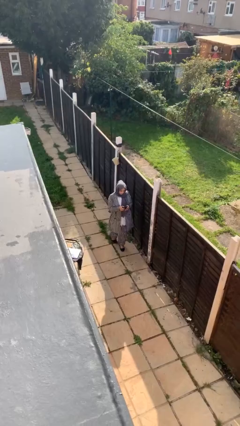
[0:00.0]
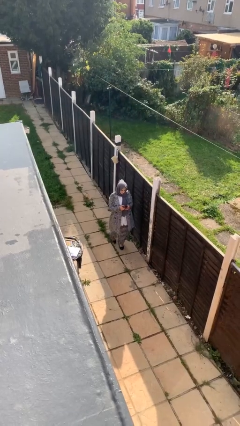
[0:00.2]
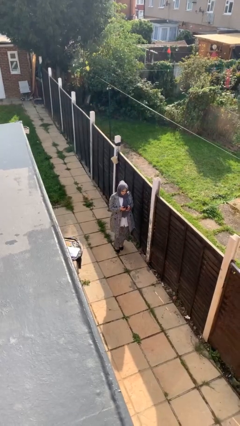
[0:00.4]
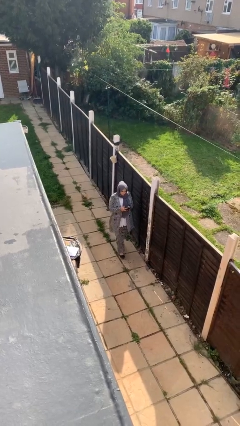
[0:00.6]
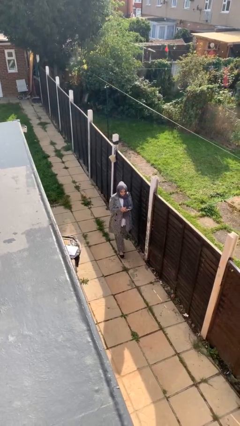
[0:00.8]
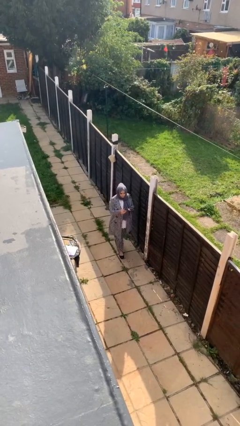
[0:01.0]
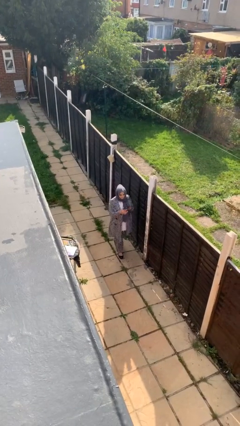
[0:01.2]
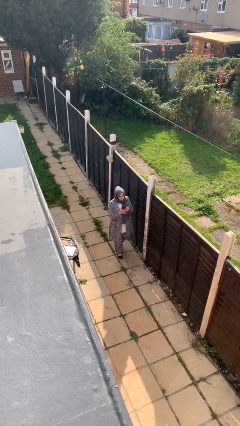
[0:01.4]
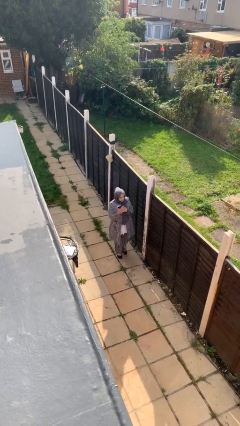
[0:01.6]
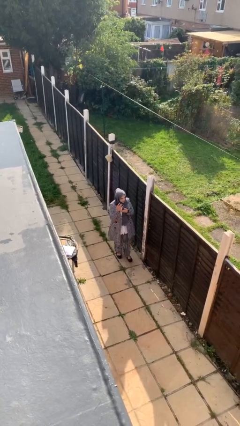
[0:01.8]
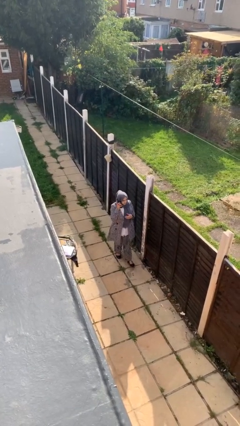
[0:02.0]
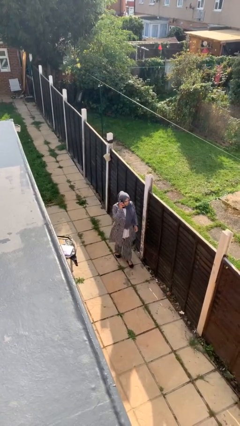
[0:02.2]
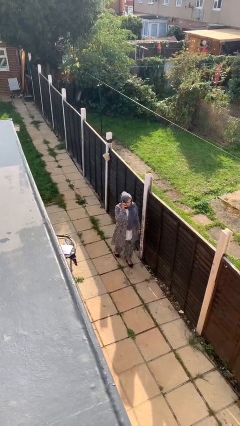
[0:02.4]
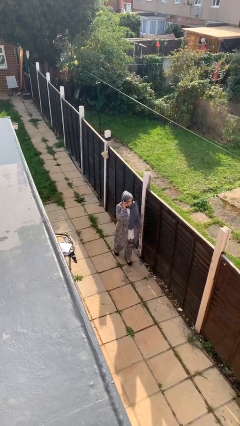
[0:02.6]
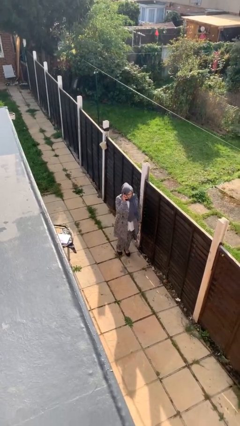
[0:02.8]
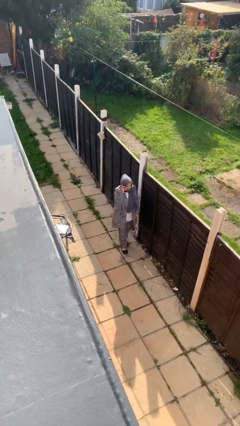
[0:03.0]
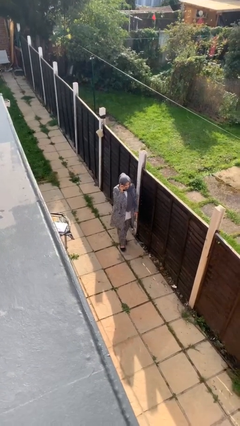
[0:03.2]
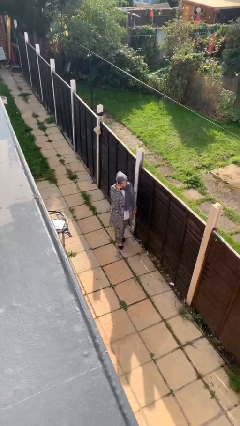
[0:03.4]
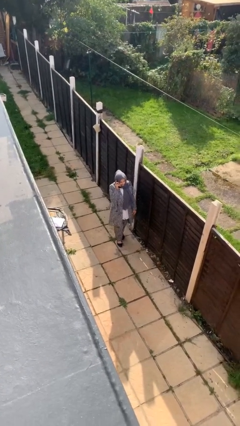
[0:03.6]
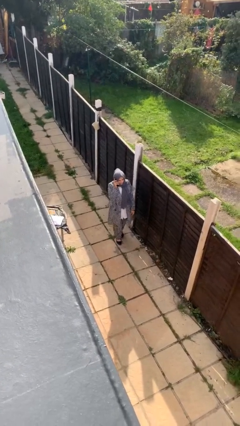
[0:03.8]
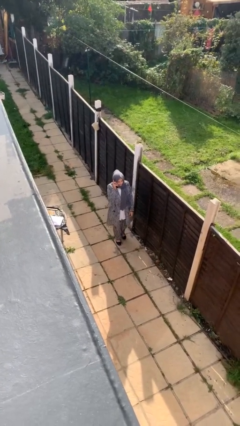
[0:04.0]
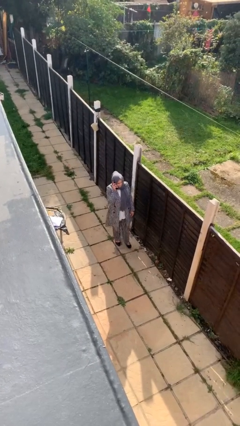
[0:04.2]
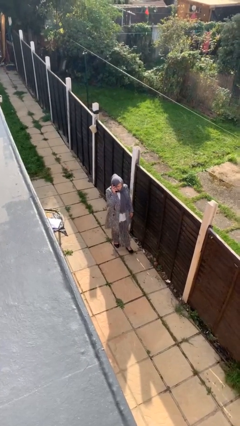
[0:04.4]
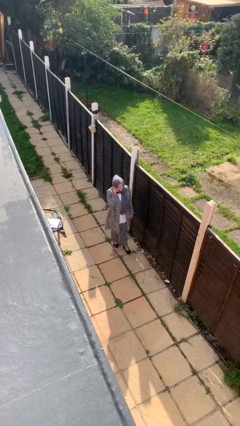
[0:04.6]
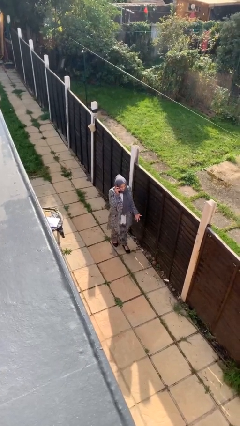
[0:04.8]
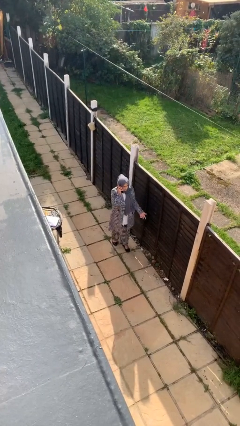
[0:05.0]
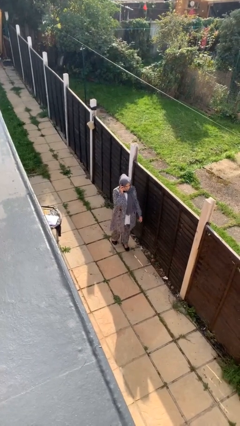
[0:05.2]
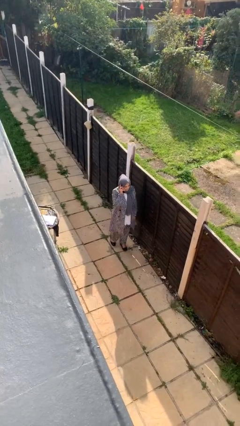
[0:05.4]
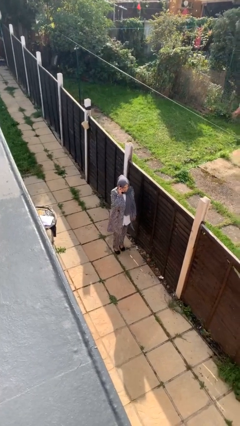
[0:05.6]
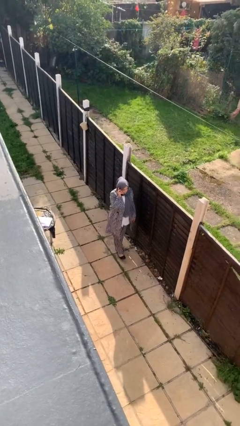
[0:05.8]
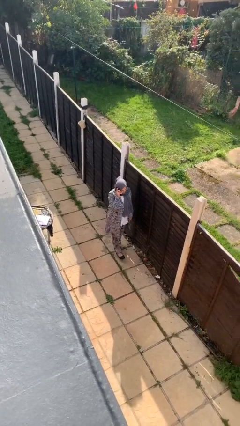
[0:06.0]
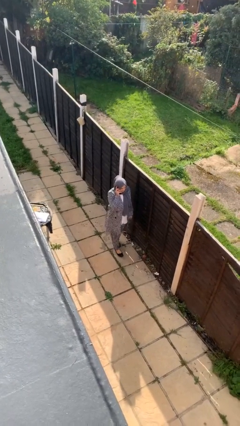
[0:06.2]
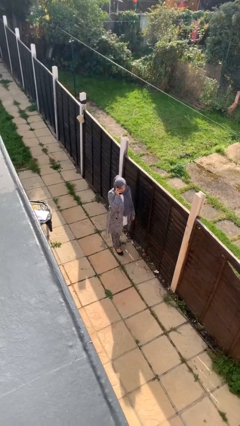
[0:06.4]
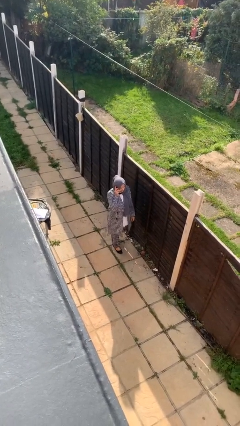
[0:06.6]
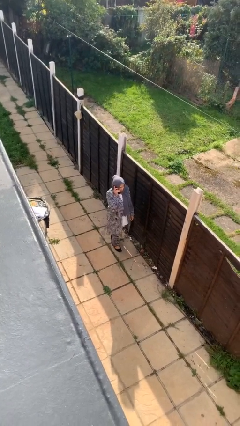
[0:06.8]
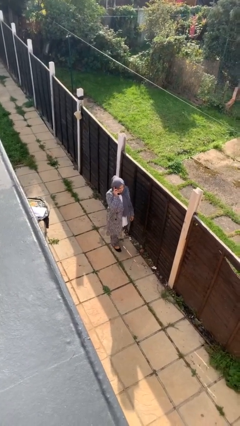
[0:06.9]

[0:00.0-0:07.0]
person talks on phone

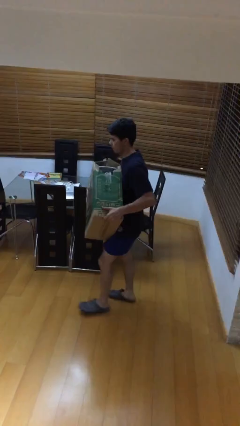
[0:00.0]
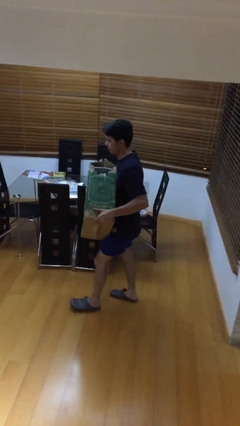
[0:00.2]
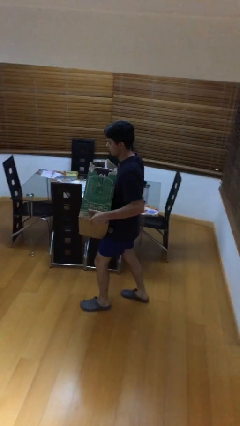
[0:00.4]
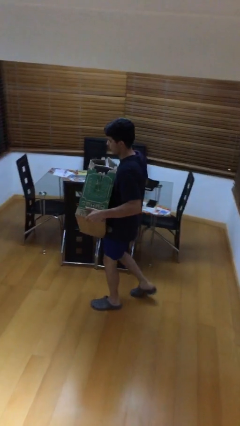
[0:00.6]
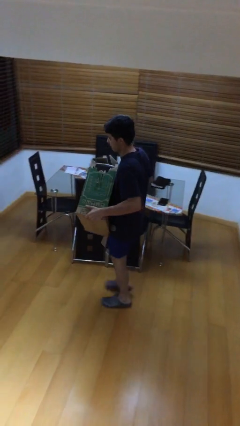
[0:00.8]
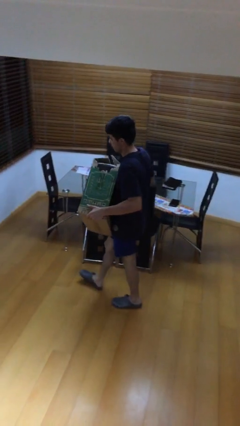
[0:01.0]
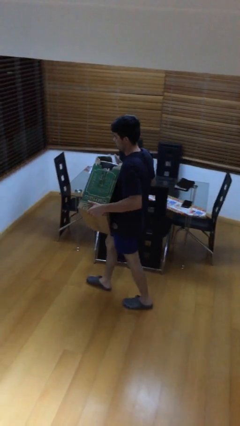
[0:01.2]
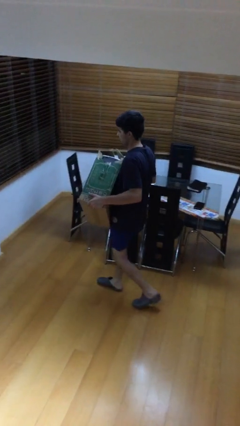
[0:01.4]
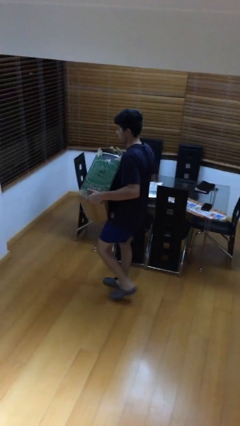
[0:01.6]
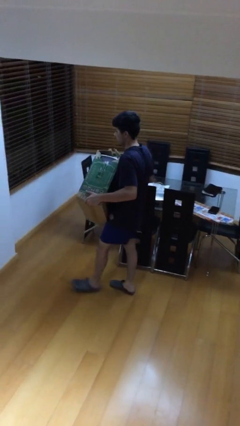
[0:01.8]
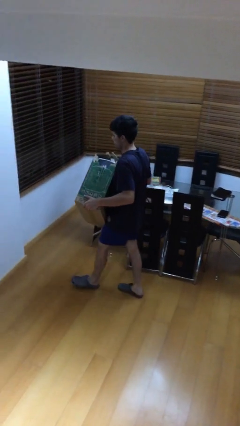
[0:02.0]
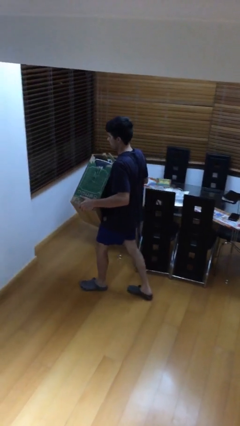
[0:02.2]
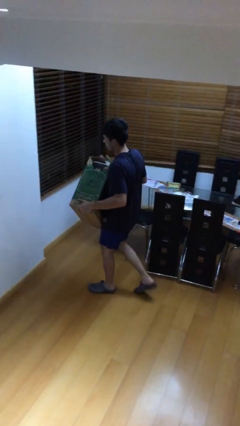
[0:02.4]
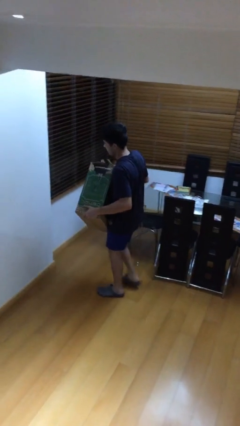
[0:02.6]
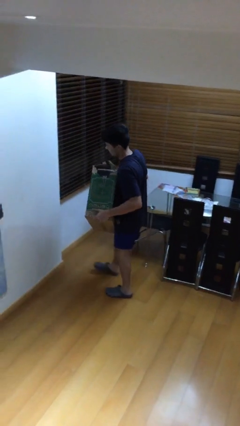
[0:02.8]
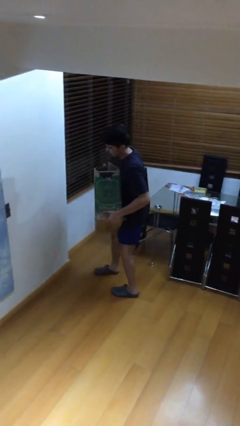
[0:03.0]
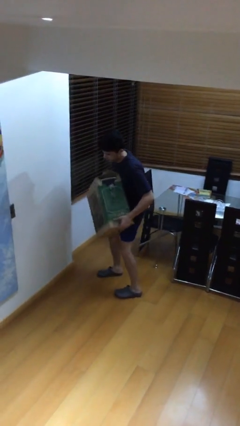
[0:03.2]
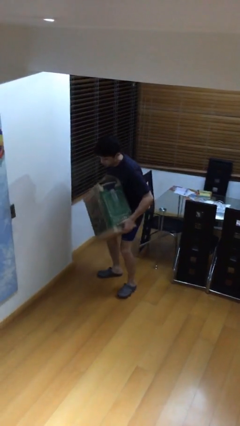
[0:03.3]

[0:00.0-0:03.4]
person carries heavy object

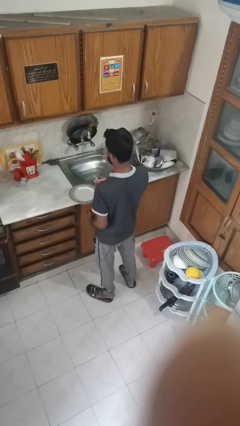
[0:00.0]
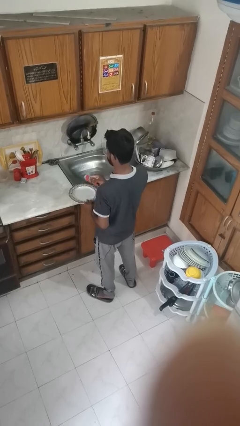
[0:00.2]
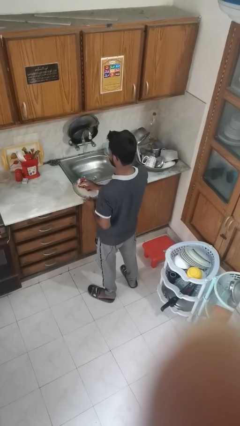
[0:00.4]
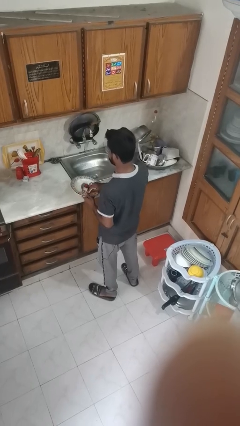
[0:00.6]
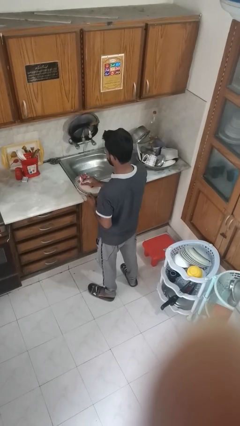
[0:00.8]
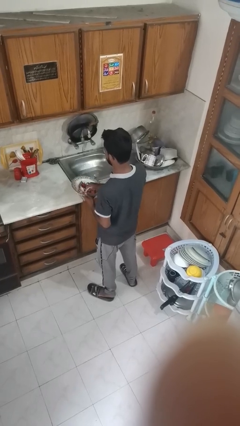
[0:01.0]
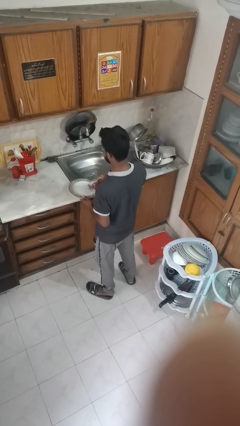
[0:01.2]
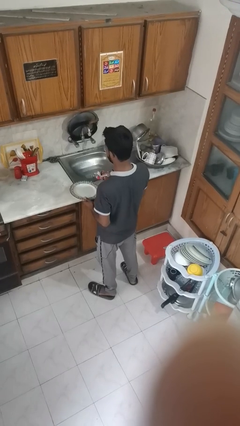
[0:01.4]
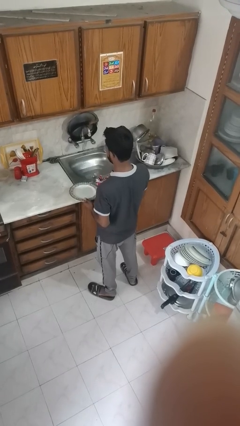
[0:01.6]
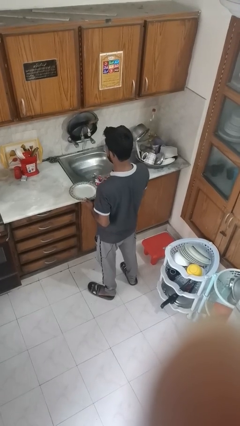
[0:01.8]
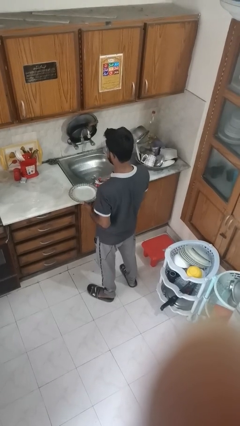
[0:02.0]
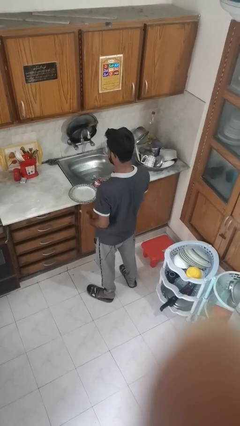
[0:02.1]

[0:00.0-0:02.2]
person dries dish

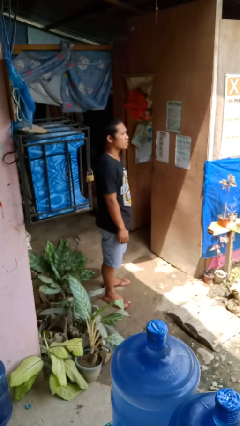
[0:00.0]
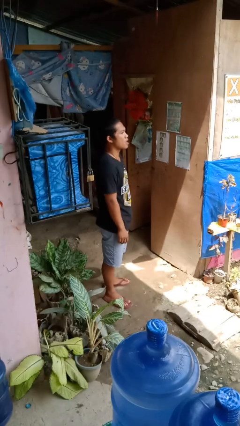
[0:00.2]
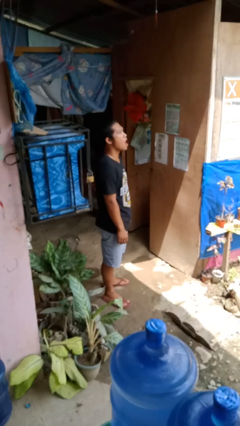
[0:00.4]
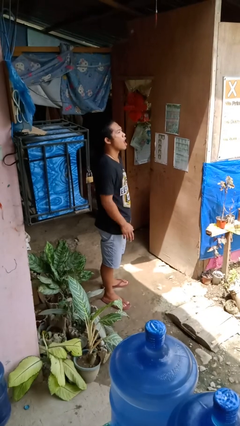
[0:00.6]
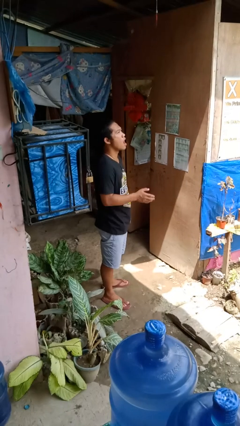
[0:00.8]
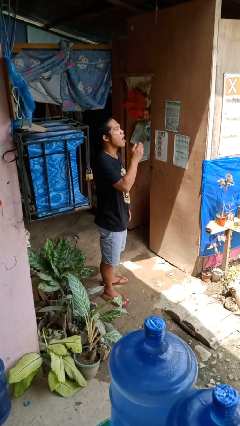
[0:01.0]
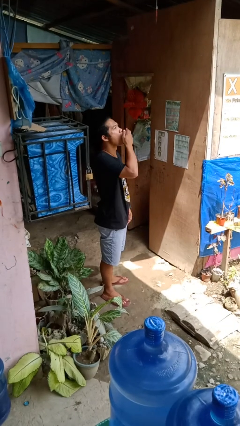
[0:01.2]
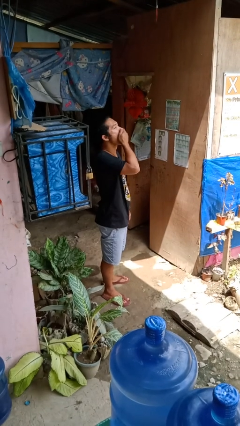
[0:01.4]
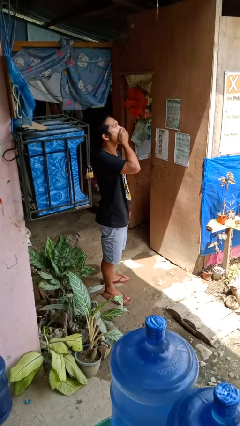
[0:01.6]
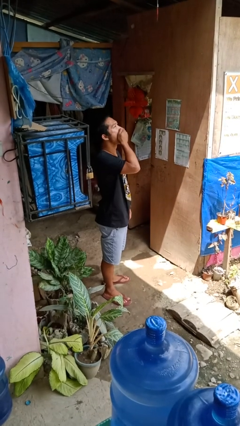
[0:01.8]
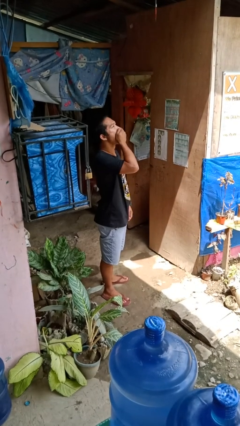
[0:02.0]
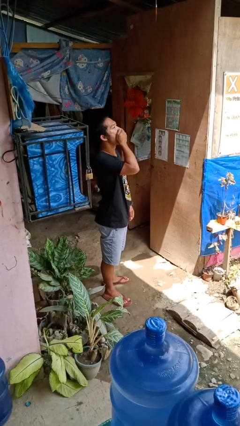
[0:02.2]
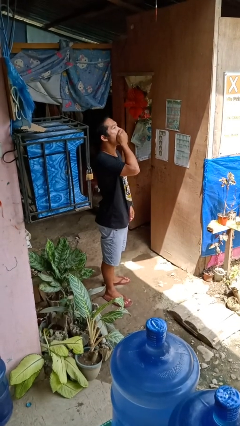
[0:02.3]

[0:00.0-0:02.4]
person yawns

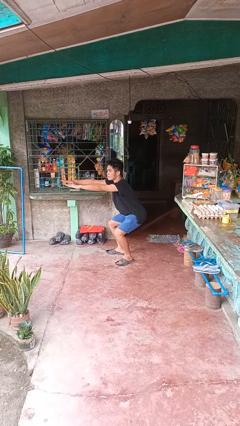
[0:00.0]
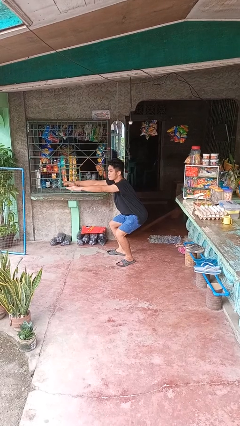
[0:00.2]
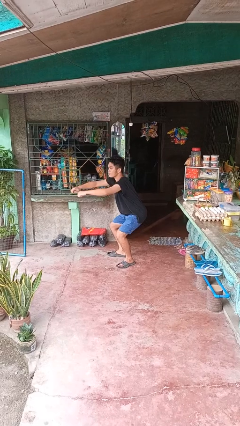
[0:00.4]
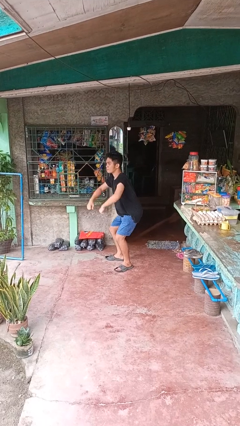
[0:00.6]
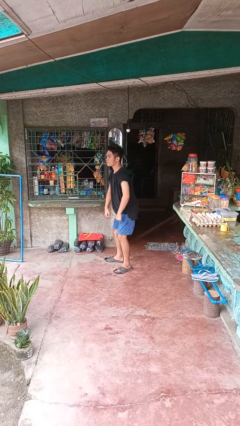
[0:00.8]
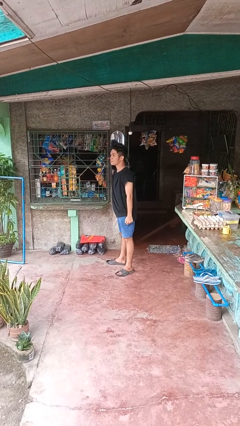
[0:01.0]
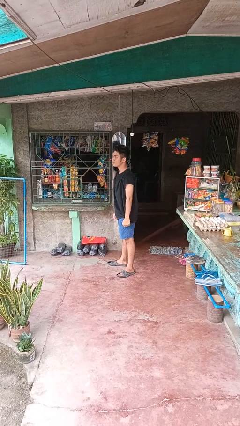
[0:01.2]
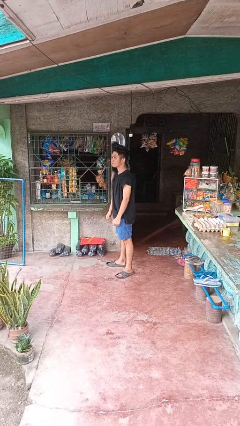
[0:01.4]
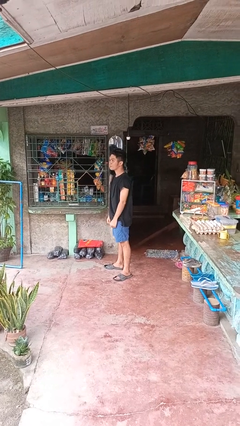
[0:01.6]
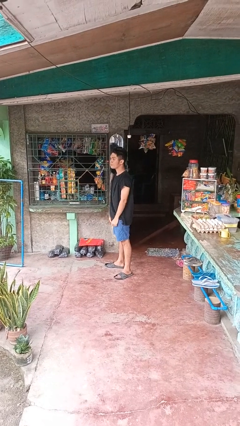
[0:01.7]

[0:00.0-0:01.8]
person stands up

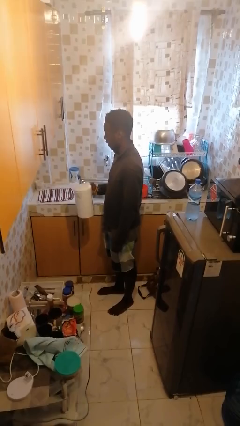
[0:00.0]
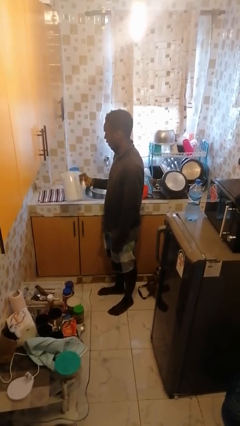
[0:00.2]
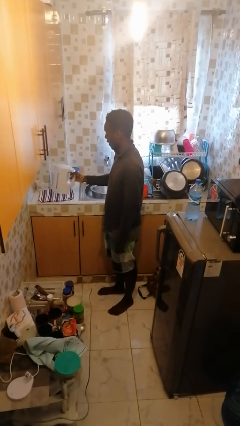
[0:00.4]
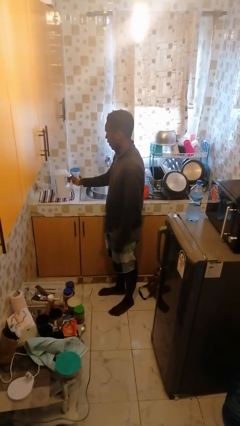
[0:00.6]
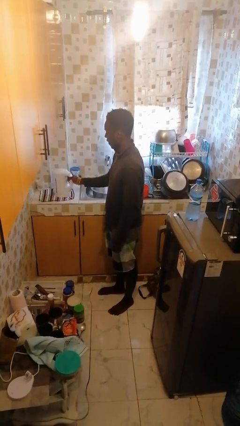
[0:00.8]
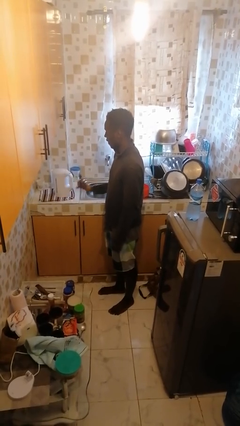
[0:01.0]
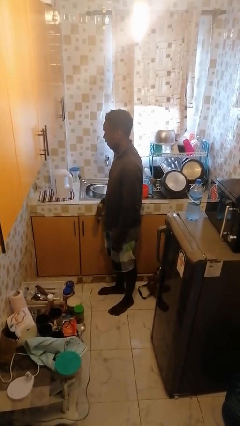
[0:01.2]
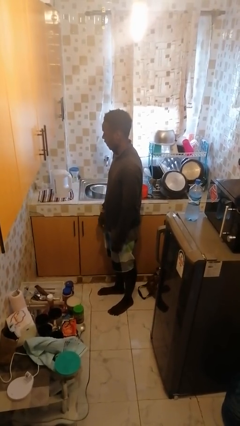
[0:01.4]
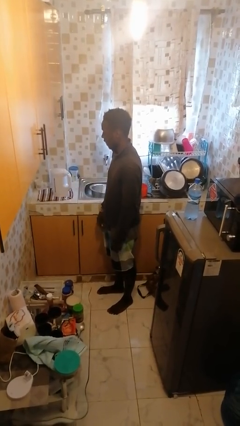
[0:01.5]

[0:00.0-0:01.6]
person puts down object on countertop
